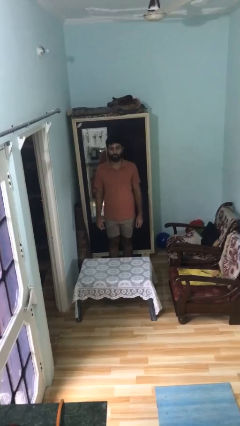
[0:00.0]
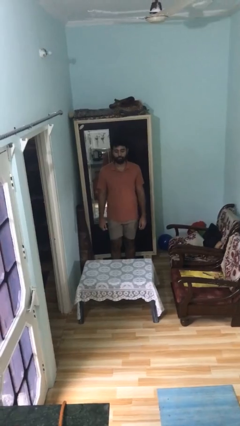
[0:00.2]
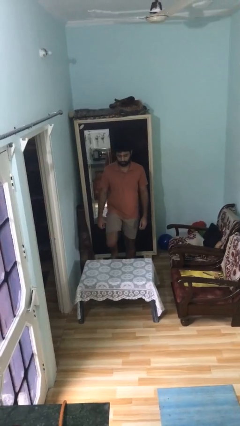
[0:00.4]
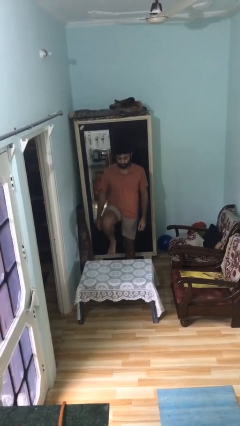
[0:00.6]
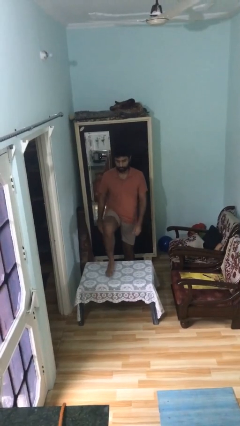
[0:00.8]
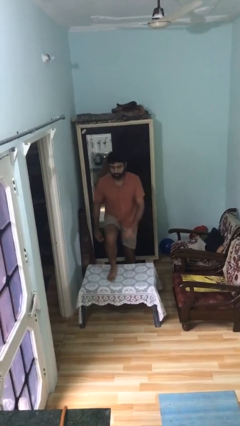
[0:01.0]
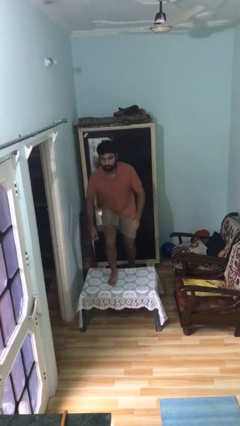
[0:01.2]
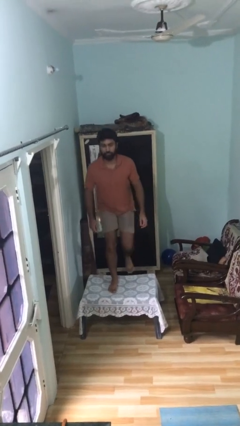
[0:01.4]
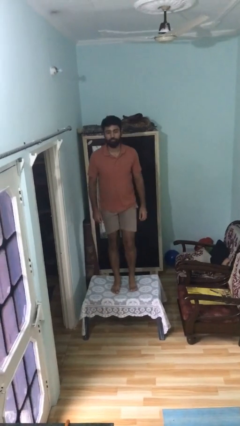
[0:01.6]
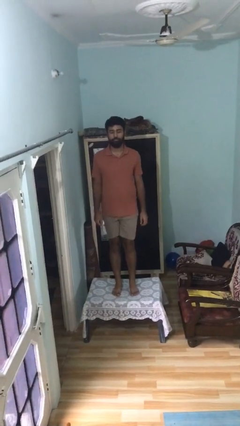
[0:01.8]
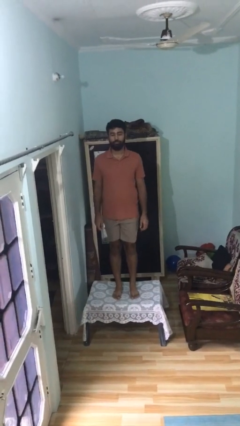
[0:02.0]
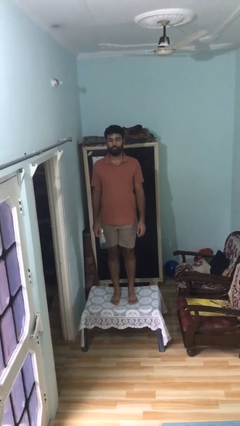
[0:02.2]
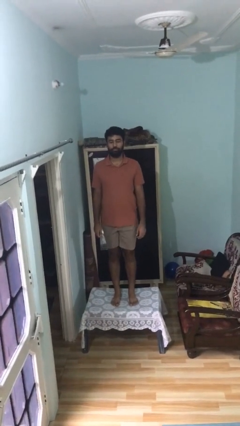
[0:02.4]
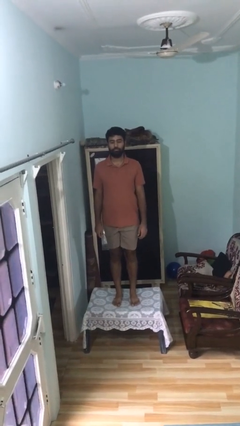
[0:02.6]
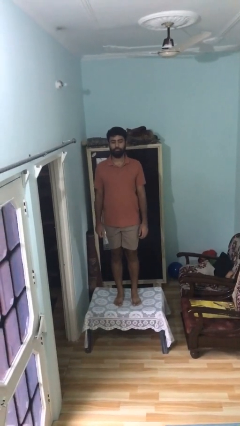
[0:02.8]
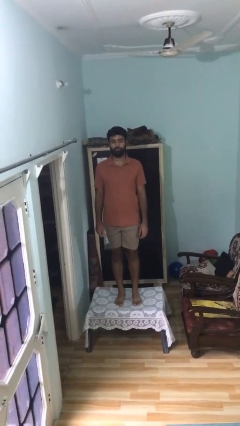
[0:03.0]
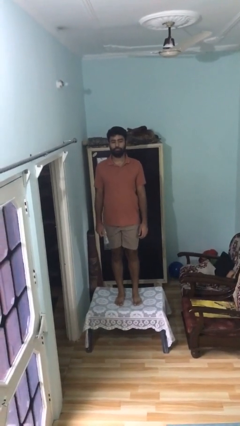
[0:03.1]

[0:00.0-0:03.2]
person climbs on table

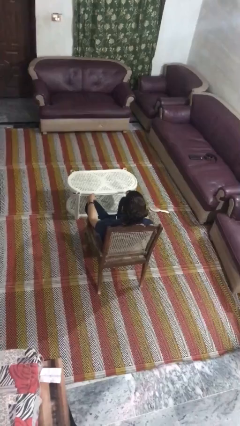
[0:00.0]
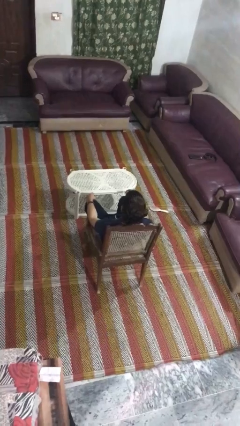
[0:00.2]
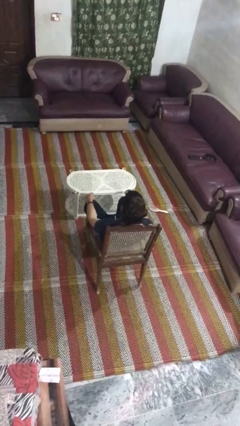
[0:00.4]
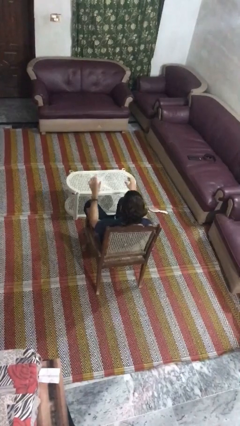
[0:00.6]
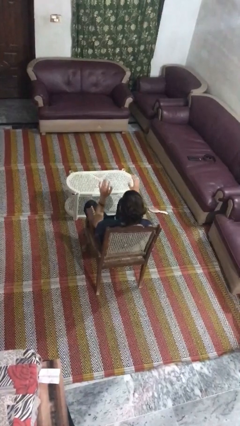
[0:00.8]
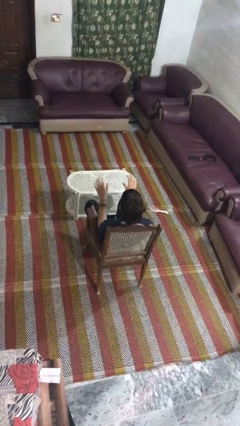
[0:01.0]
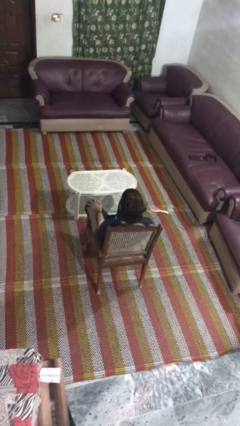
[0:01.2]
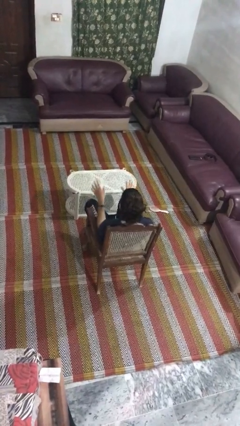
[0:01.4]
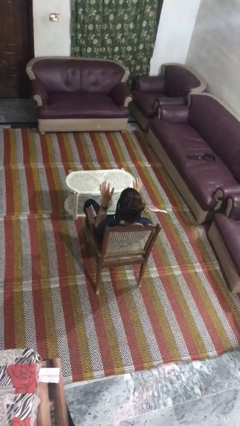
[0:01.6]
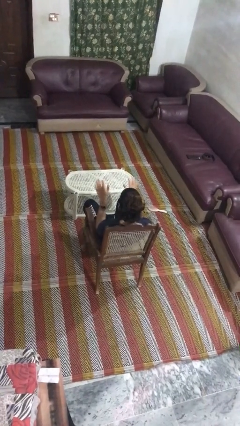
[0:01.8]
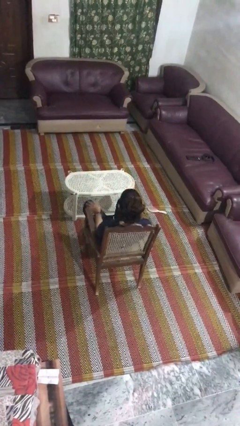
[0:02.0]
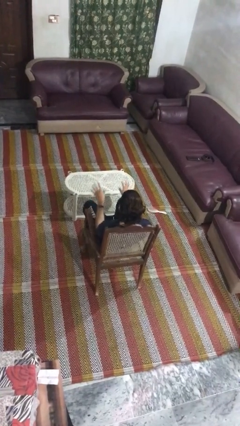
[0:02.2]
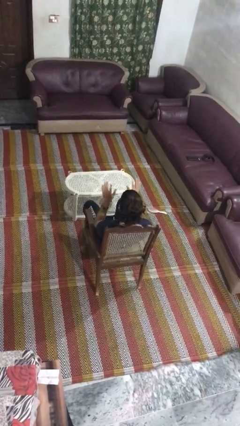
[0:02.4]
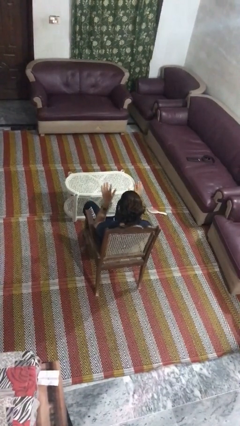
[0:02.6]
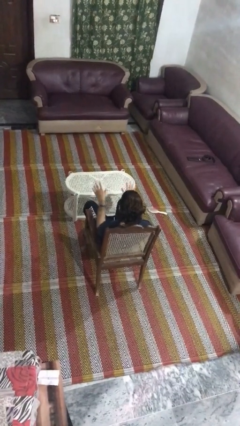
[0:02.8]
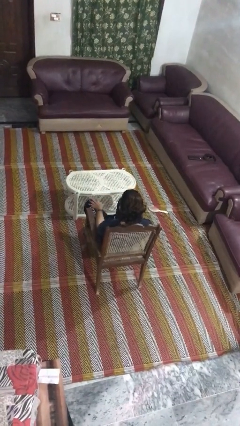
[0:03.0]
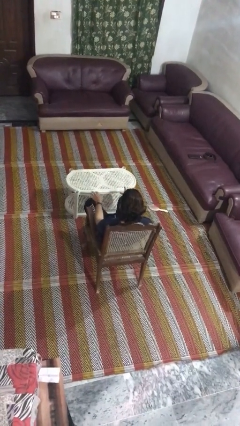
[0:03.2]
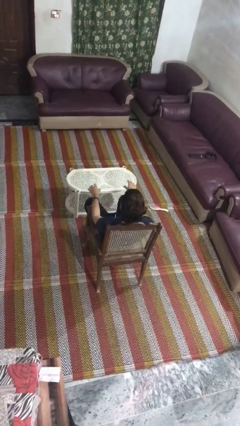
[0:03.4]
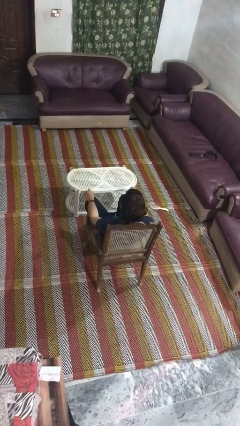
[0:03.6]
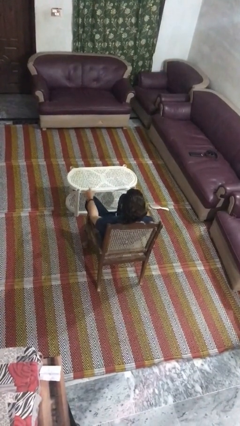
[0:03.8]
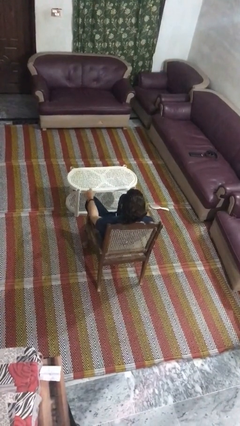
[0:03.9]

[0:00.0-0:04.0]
person slaps hands on thighs

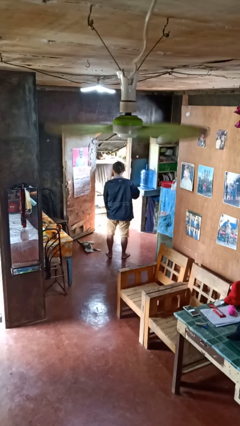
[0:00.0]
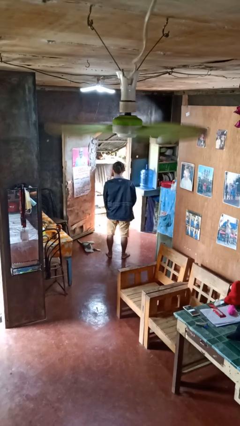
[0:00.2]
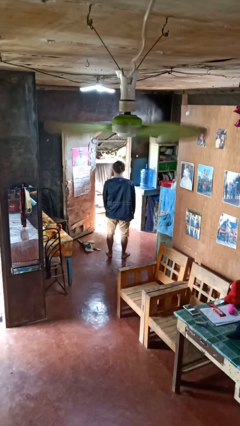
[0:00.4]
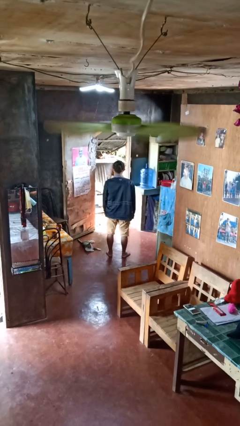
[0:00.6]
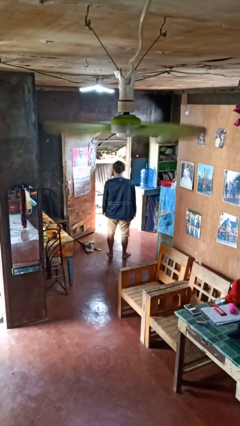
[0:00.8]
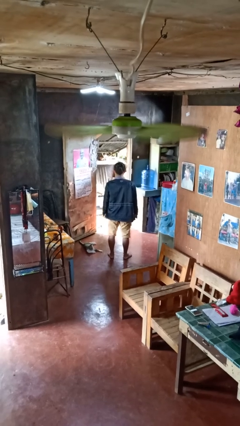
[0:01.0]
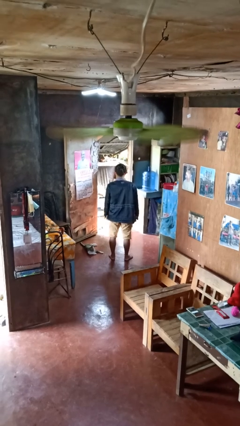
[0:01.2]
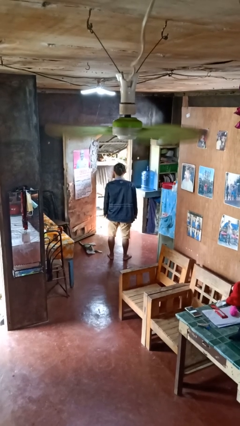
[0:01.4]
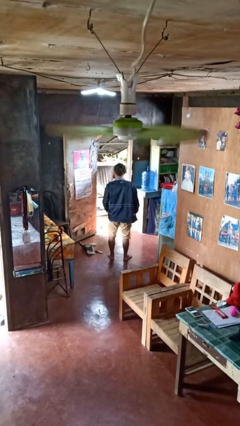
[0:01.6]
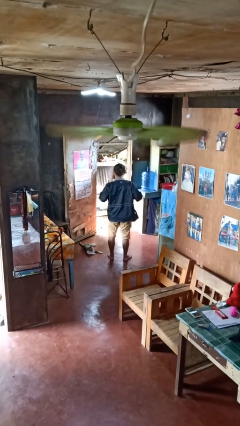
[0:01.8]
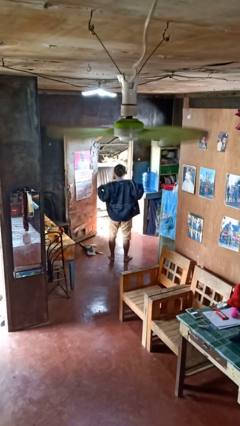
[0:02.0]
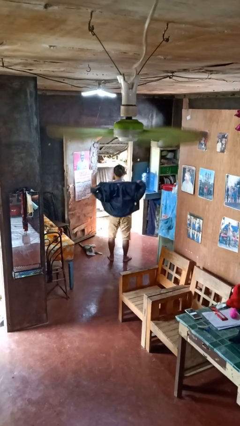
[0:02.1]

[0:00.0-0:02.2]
person unzips jacket

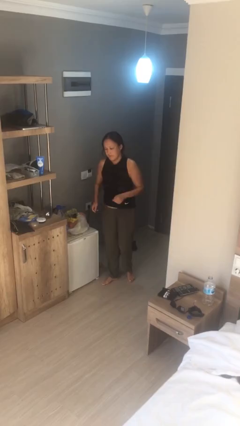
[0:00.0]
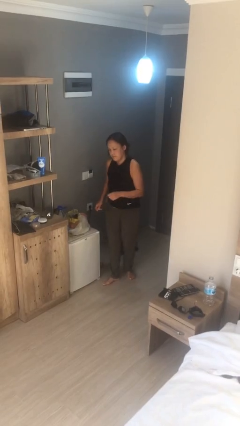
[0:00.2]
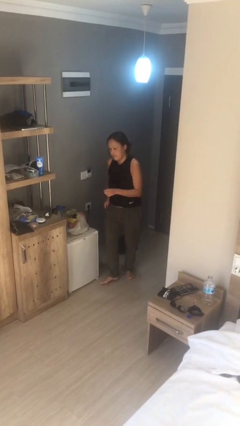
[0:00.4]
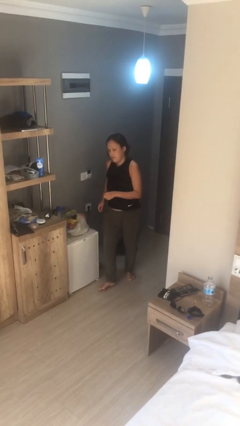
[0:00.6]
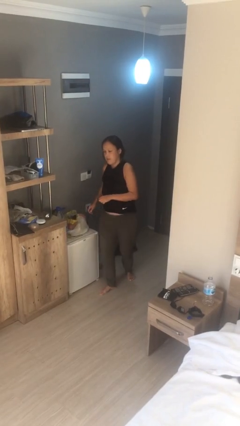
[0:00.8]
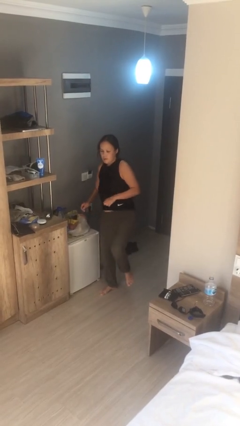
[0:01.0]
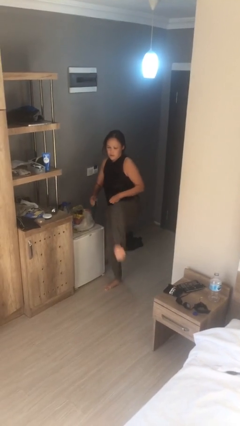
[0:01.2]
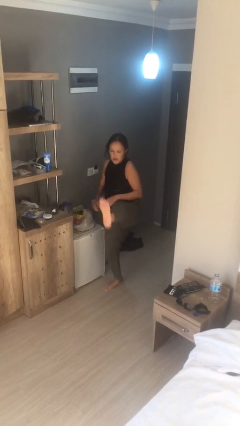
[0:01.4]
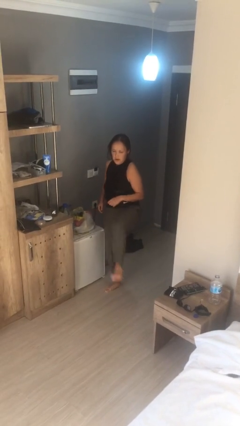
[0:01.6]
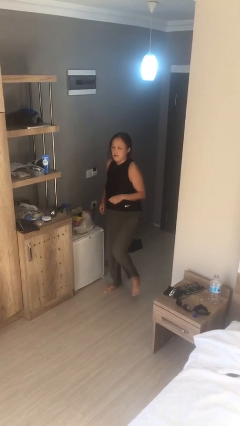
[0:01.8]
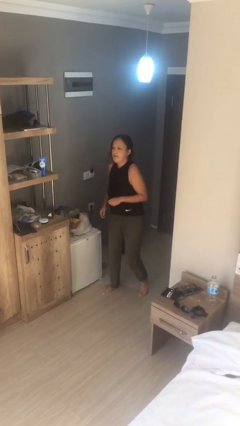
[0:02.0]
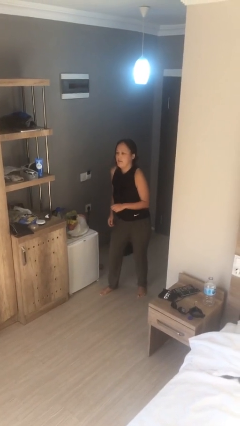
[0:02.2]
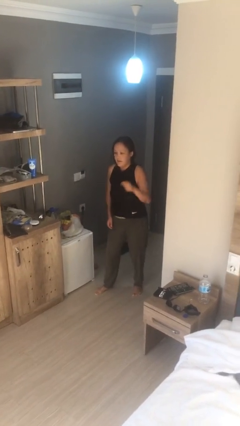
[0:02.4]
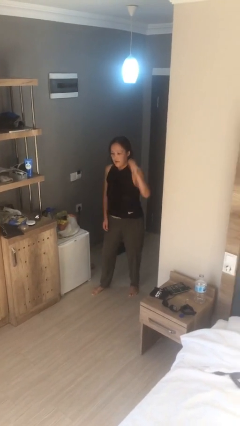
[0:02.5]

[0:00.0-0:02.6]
person karate kicks

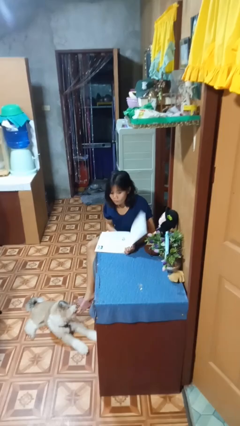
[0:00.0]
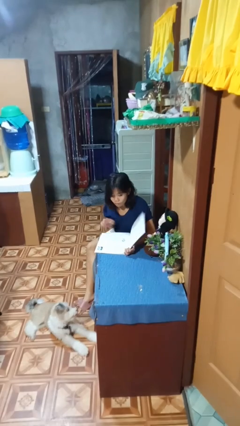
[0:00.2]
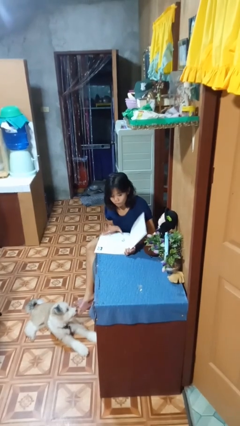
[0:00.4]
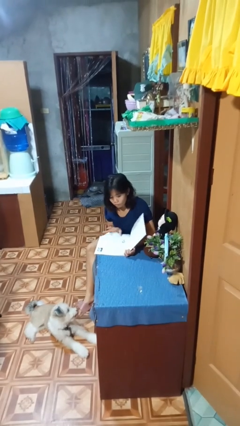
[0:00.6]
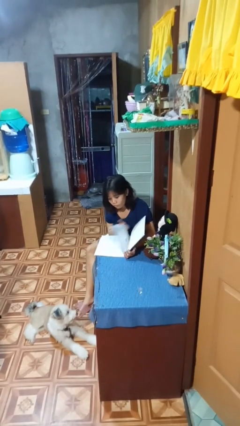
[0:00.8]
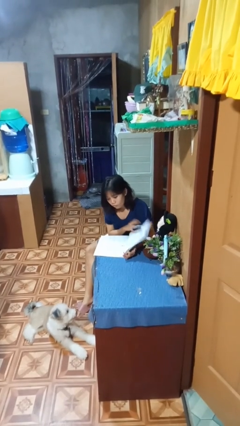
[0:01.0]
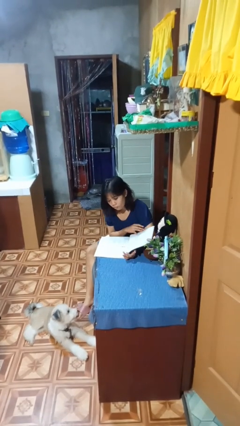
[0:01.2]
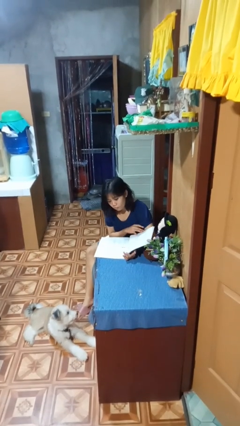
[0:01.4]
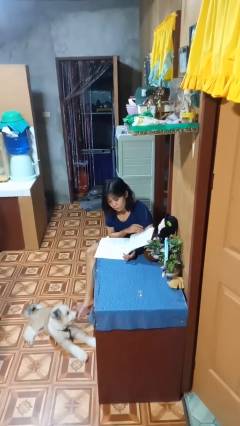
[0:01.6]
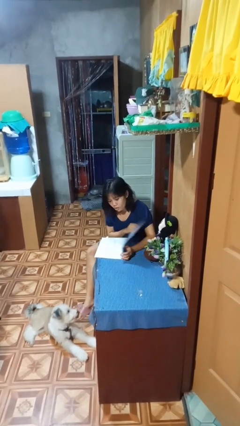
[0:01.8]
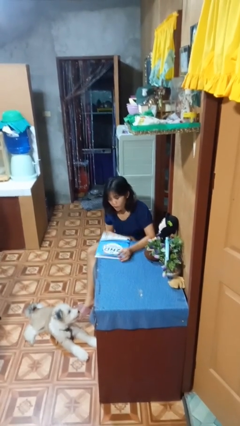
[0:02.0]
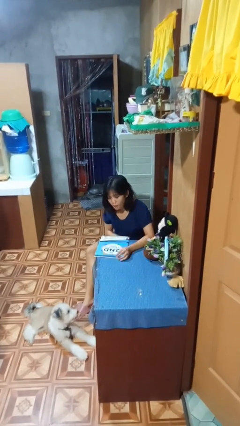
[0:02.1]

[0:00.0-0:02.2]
person reads magazine

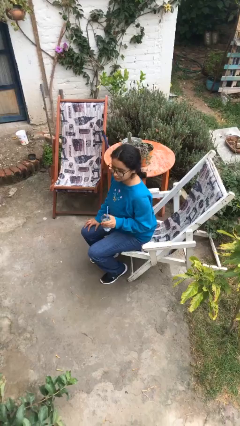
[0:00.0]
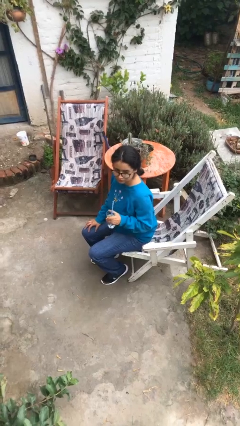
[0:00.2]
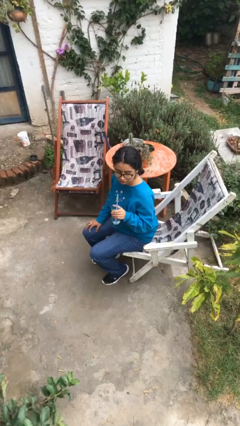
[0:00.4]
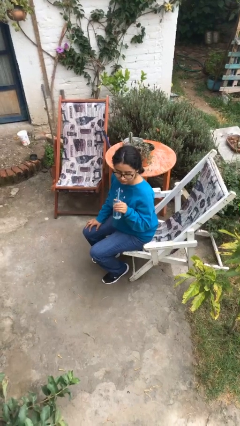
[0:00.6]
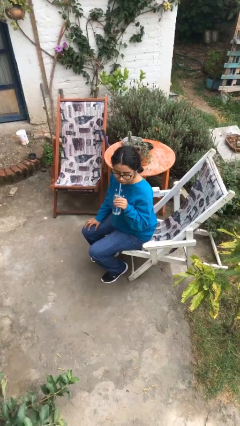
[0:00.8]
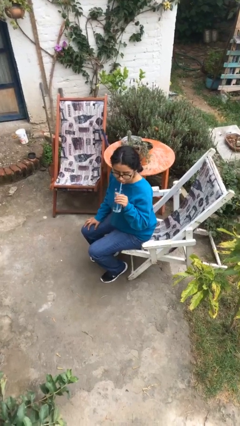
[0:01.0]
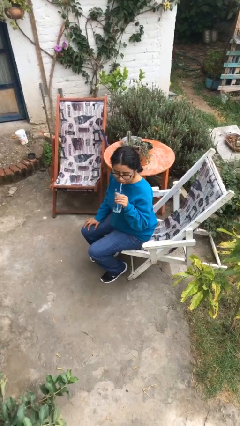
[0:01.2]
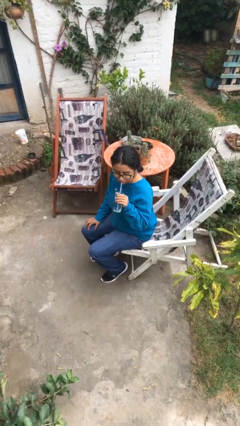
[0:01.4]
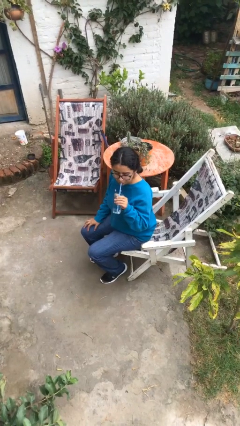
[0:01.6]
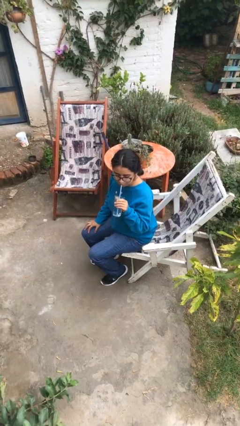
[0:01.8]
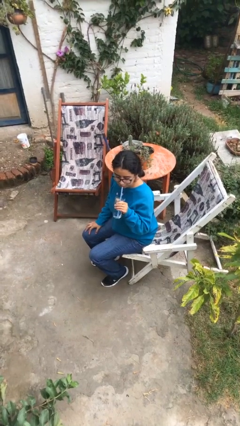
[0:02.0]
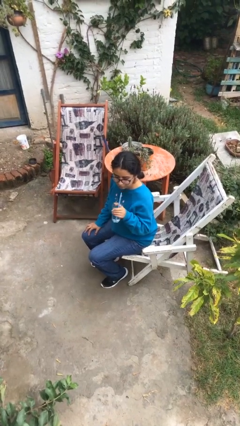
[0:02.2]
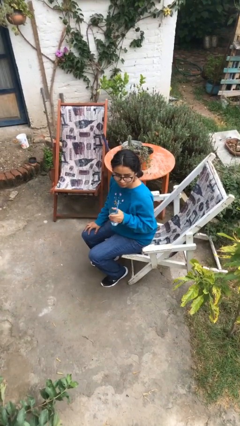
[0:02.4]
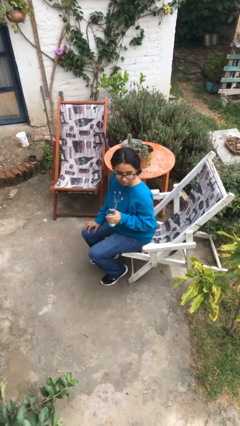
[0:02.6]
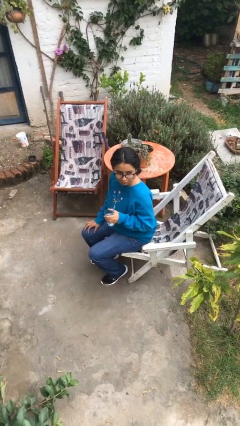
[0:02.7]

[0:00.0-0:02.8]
person drinks from straw

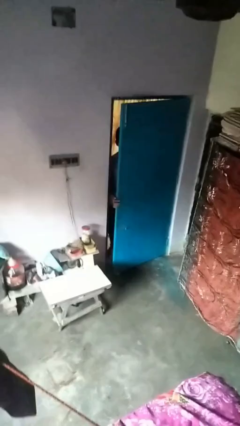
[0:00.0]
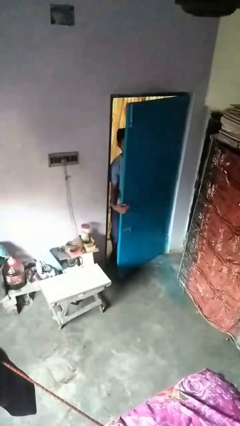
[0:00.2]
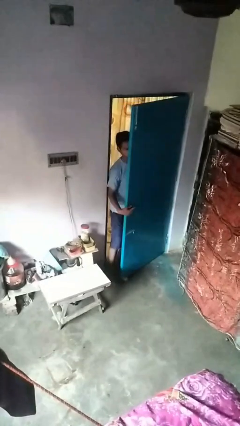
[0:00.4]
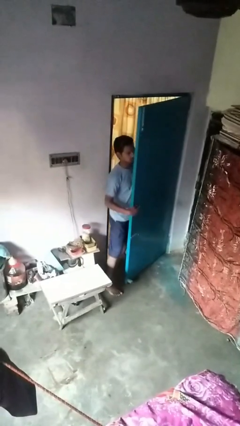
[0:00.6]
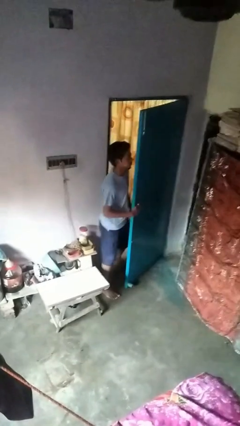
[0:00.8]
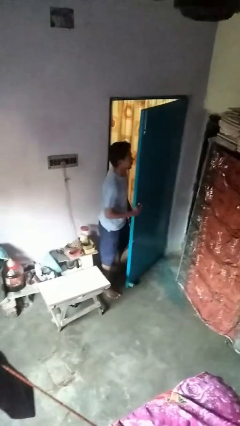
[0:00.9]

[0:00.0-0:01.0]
person opens facility door
